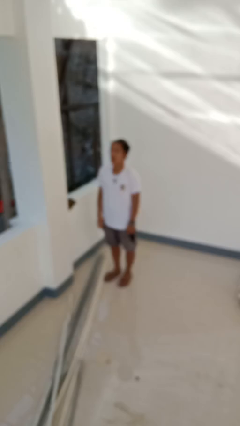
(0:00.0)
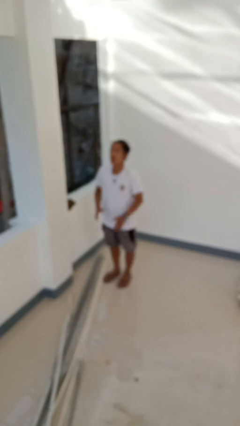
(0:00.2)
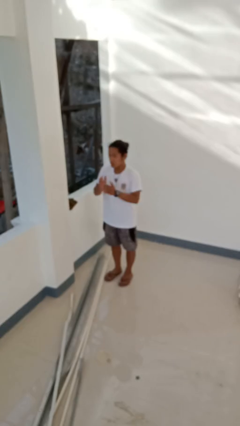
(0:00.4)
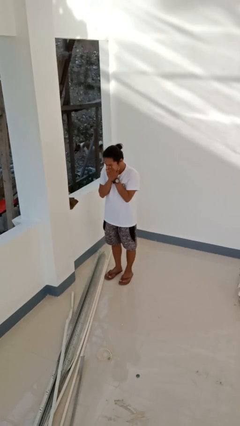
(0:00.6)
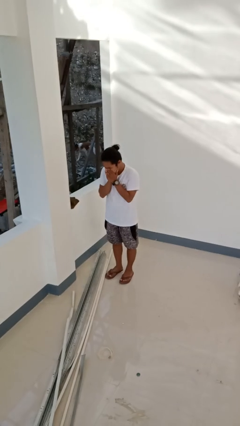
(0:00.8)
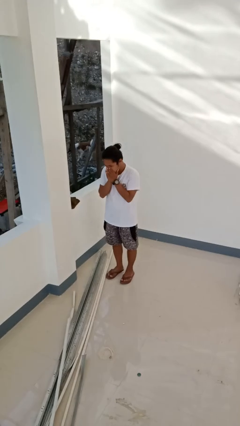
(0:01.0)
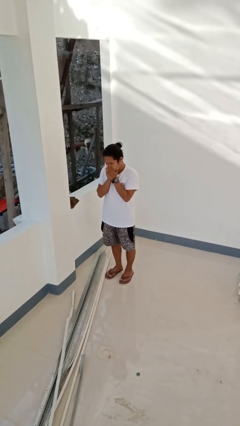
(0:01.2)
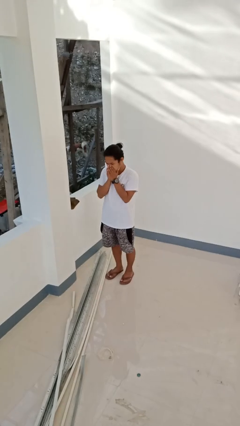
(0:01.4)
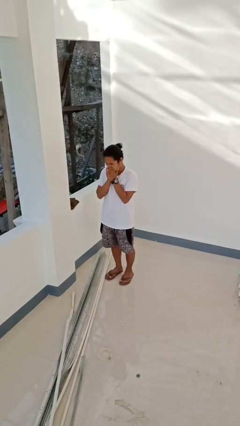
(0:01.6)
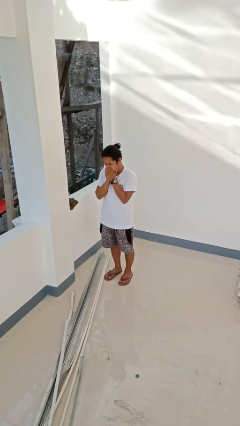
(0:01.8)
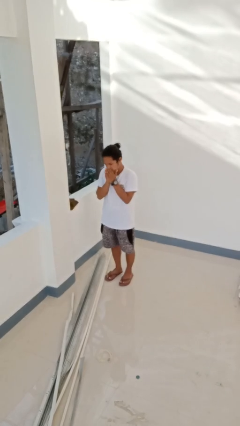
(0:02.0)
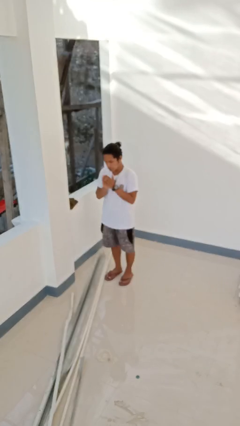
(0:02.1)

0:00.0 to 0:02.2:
person sneezes into hand

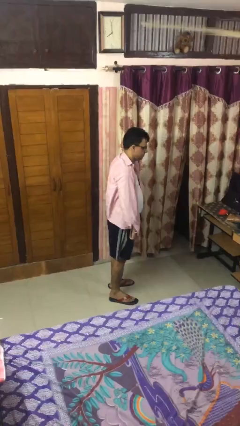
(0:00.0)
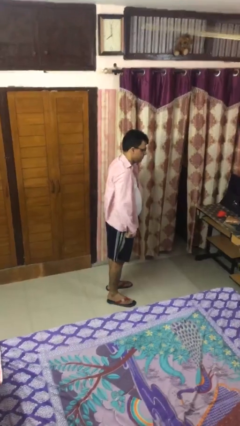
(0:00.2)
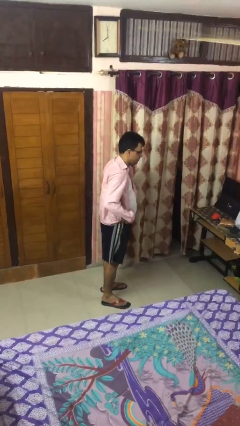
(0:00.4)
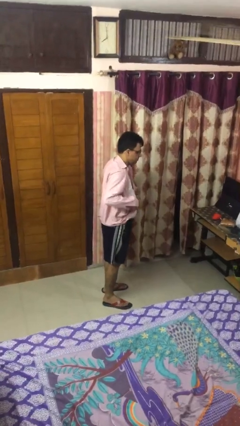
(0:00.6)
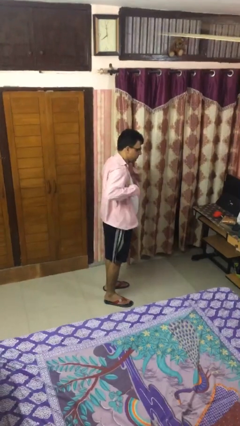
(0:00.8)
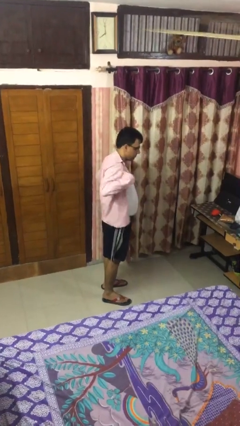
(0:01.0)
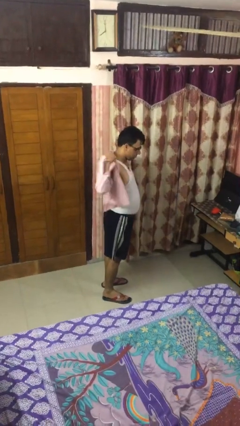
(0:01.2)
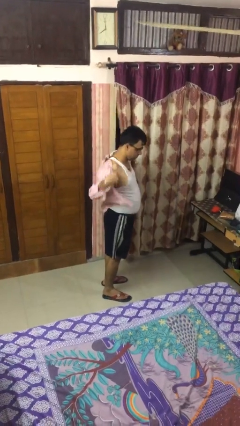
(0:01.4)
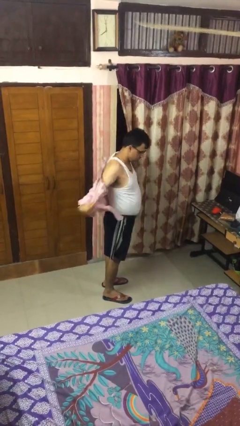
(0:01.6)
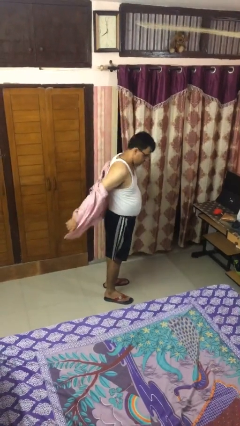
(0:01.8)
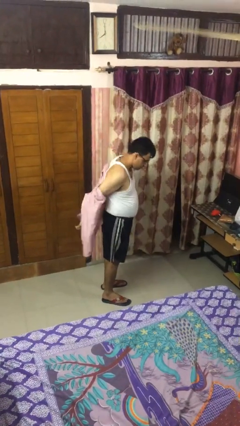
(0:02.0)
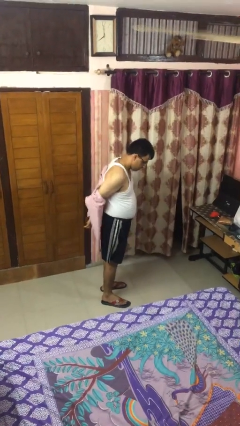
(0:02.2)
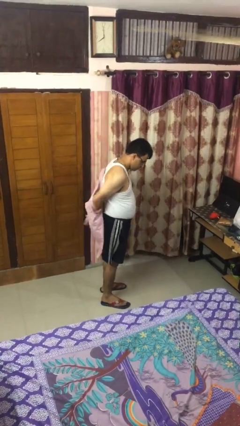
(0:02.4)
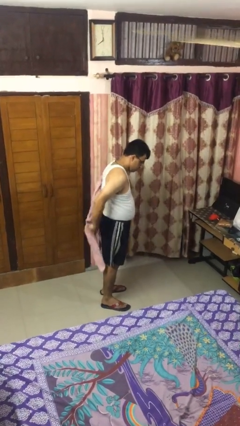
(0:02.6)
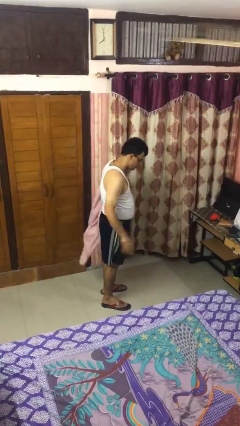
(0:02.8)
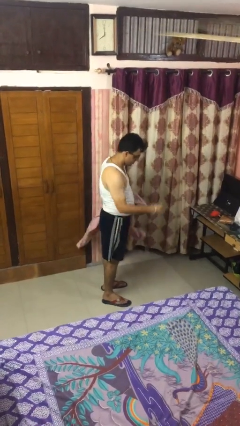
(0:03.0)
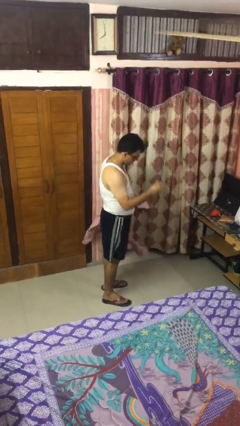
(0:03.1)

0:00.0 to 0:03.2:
person takes off shirt

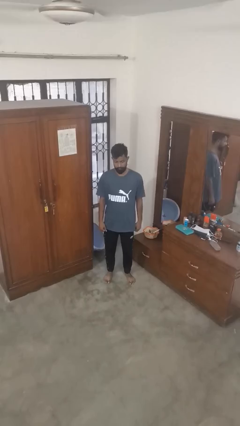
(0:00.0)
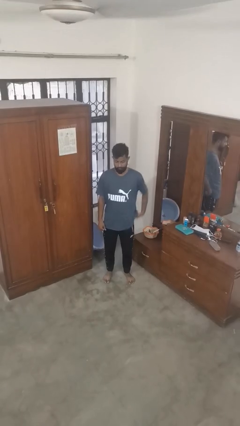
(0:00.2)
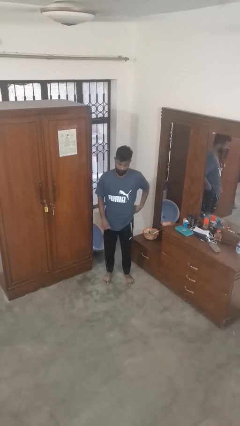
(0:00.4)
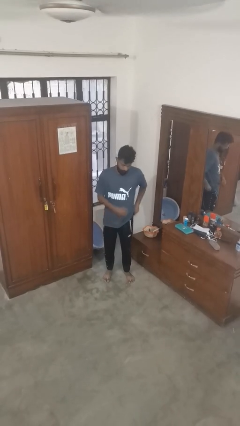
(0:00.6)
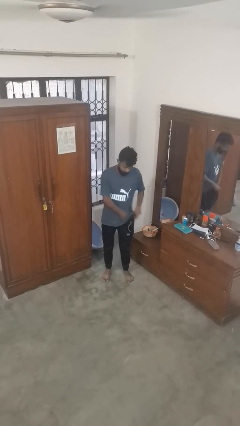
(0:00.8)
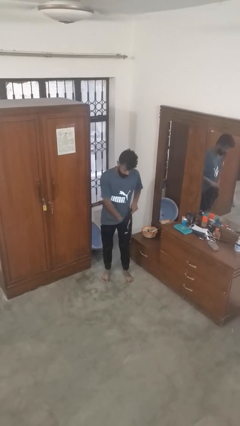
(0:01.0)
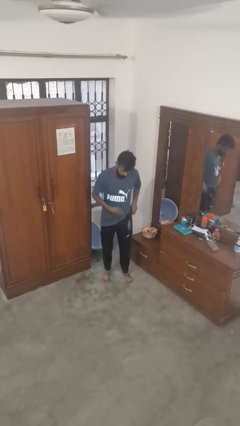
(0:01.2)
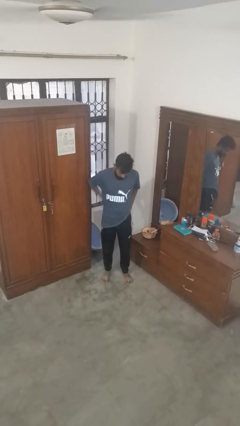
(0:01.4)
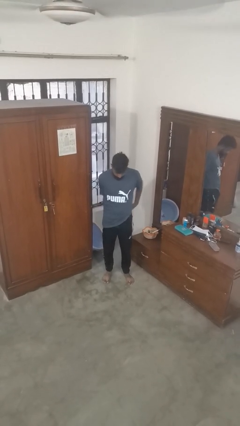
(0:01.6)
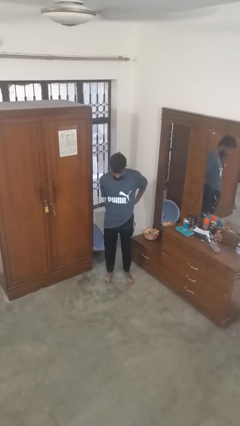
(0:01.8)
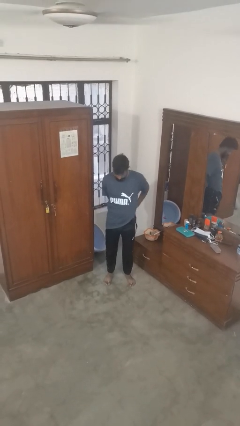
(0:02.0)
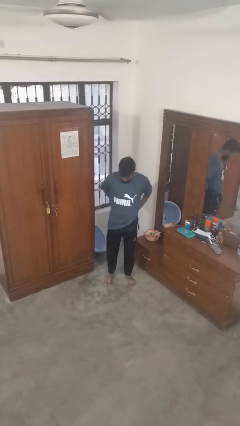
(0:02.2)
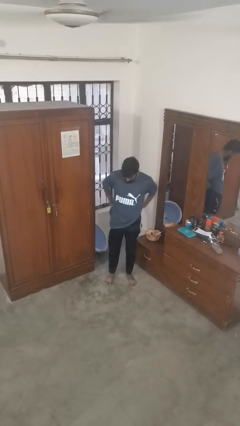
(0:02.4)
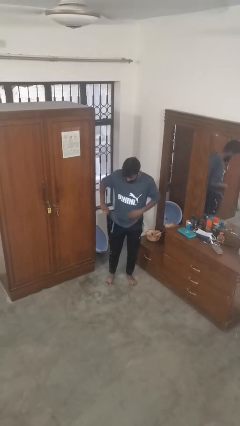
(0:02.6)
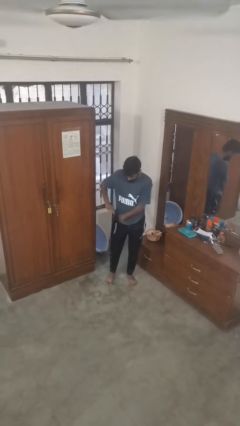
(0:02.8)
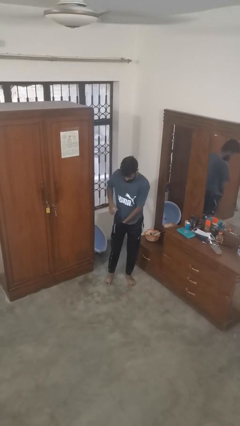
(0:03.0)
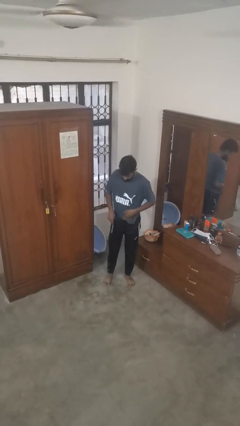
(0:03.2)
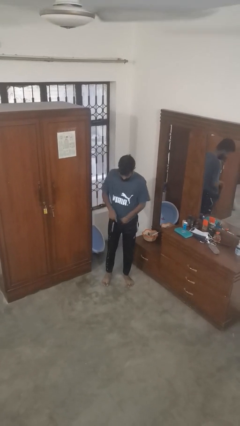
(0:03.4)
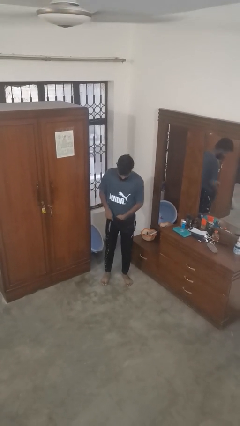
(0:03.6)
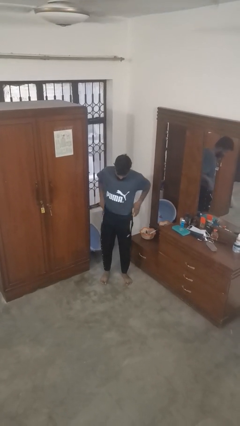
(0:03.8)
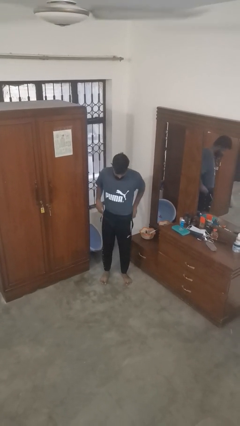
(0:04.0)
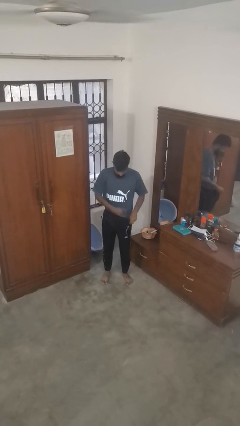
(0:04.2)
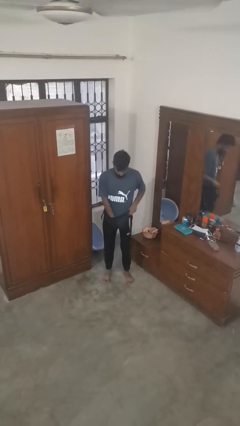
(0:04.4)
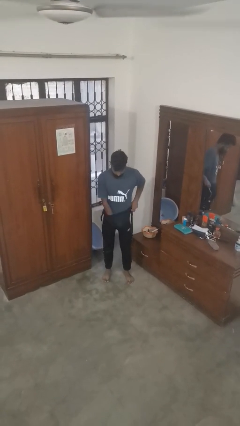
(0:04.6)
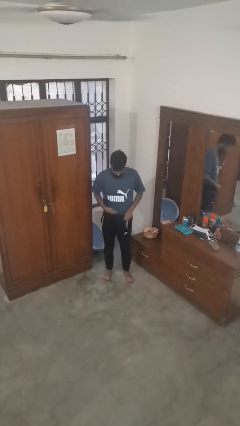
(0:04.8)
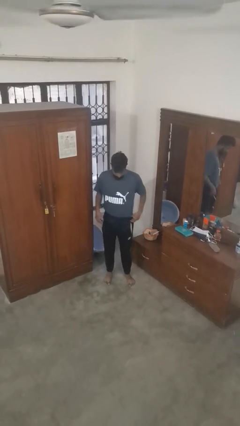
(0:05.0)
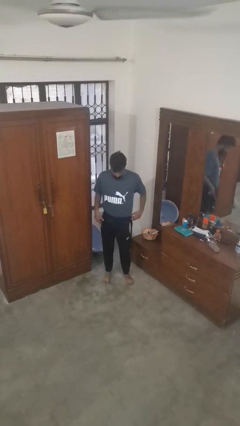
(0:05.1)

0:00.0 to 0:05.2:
person tucks in shirt

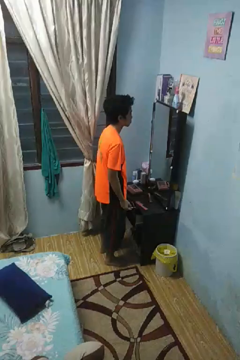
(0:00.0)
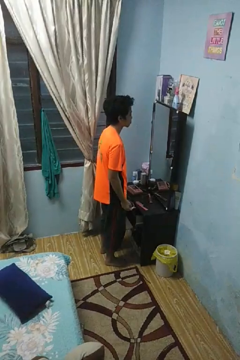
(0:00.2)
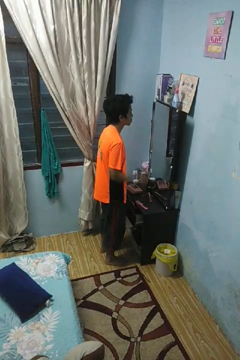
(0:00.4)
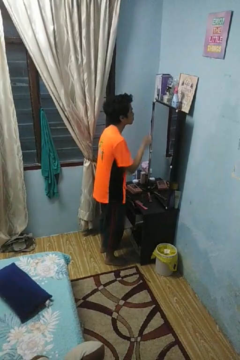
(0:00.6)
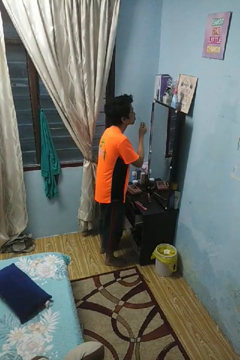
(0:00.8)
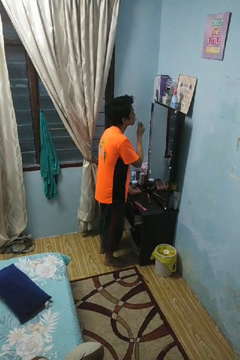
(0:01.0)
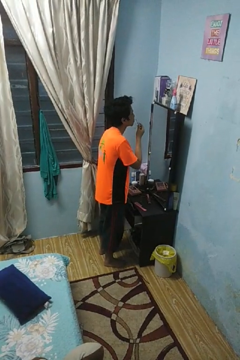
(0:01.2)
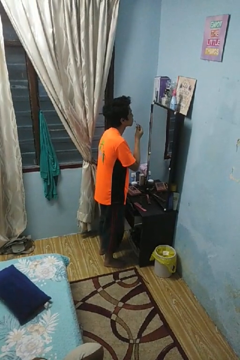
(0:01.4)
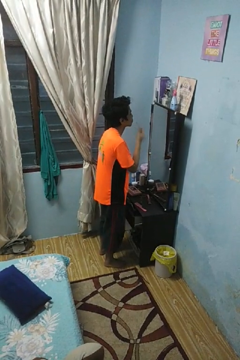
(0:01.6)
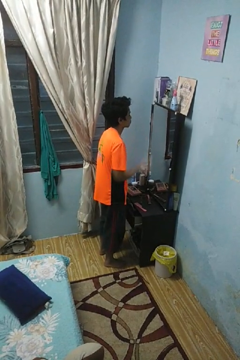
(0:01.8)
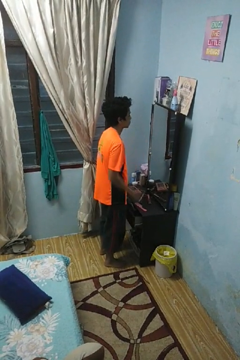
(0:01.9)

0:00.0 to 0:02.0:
person applies lip makeup

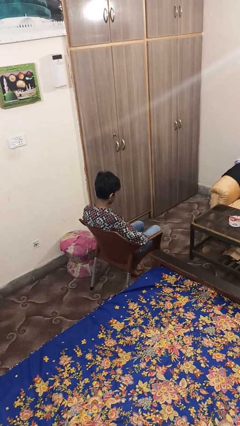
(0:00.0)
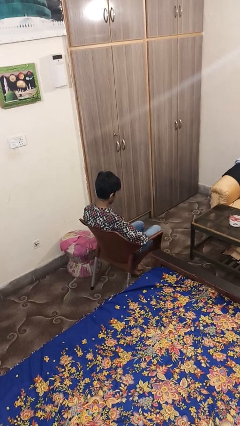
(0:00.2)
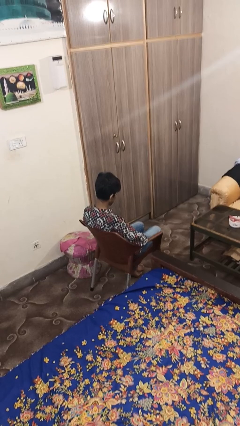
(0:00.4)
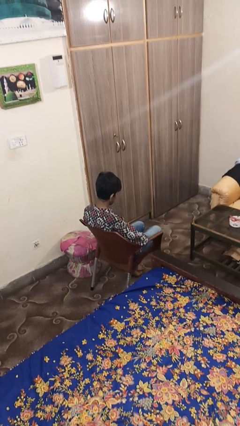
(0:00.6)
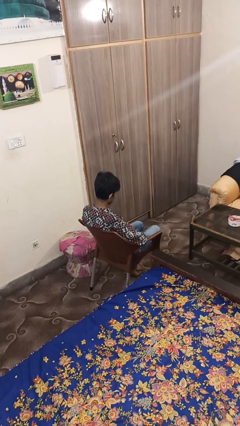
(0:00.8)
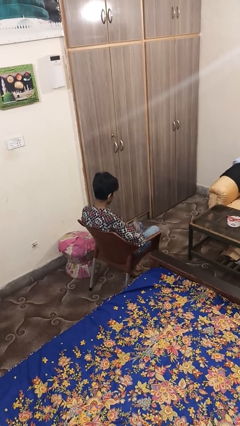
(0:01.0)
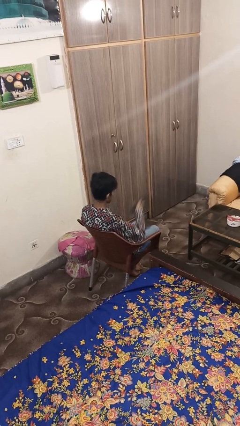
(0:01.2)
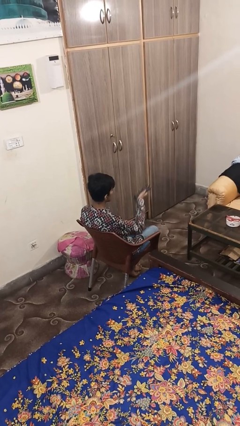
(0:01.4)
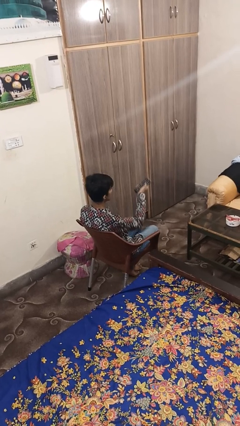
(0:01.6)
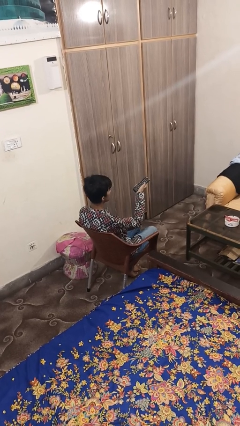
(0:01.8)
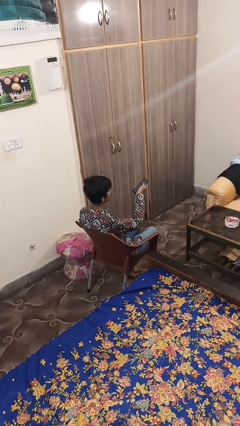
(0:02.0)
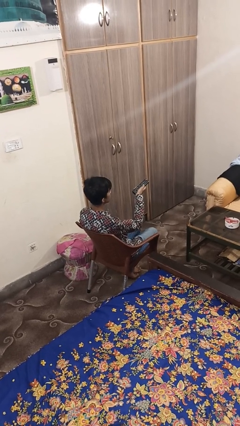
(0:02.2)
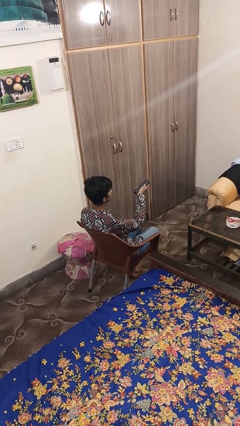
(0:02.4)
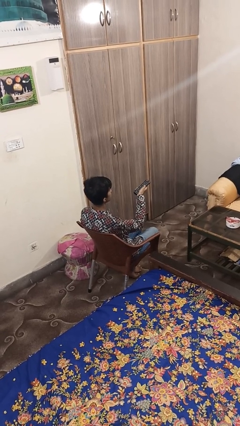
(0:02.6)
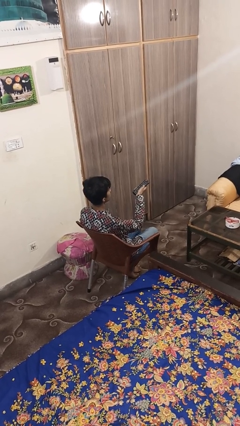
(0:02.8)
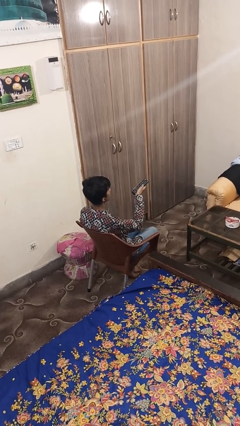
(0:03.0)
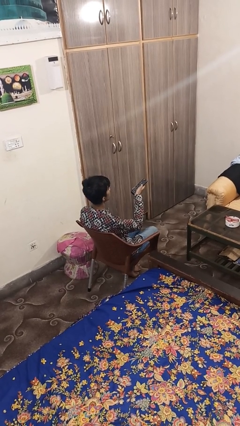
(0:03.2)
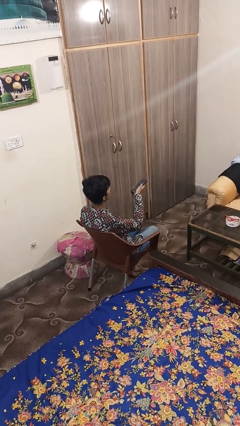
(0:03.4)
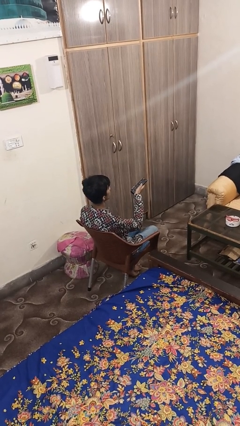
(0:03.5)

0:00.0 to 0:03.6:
person uses television remote

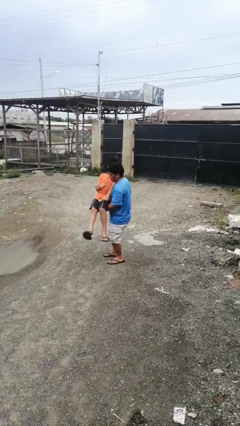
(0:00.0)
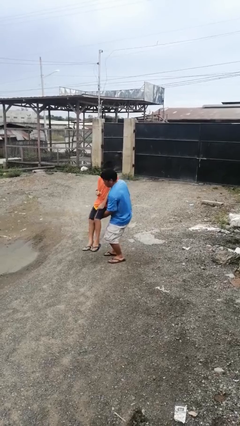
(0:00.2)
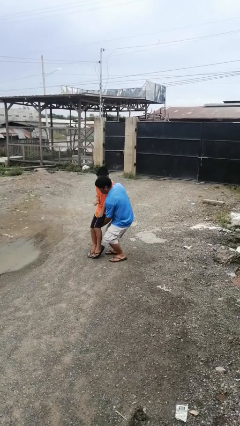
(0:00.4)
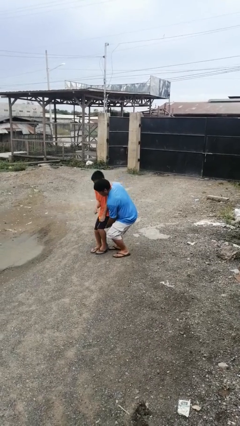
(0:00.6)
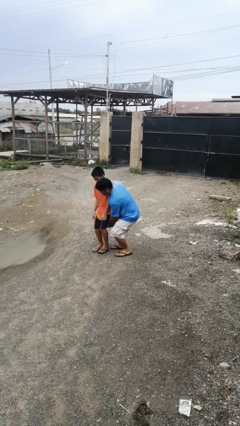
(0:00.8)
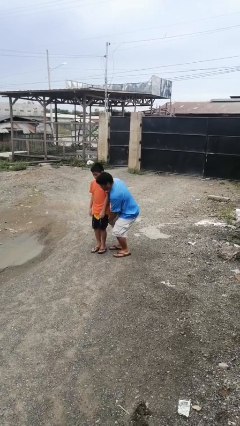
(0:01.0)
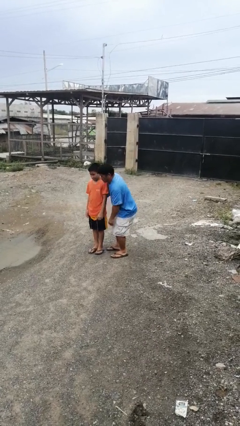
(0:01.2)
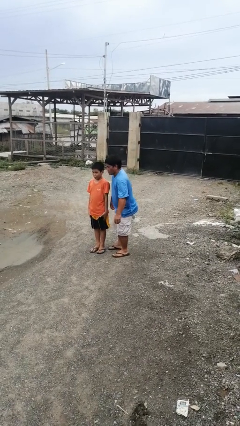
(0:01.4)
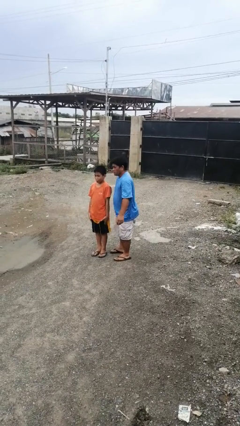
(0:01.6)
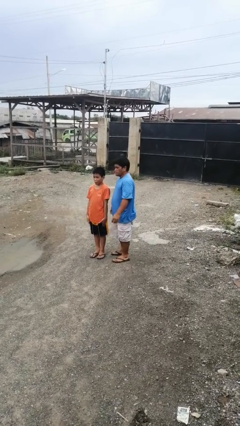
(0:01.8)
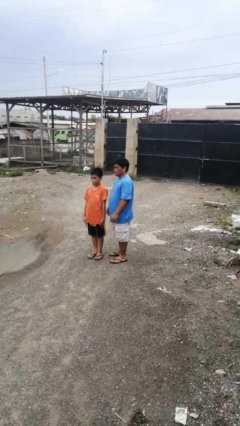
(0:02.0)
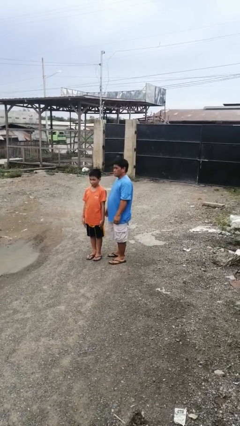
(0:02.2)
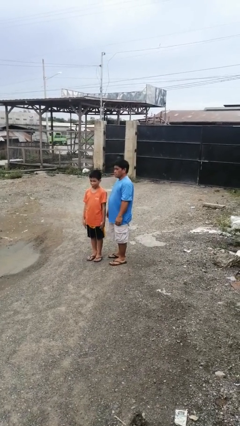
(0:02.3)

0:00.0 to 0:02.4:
person puts down person
